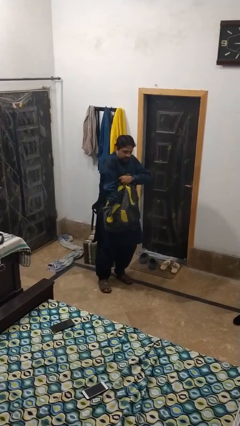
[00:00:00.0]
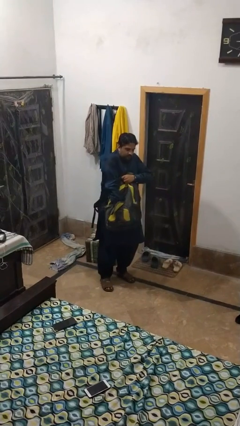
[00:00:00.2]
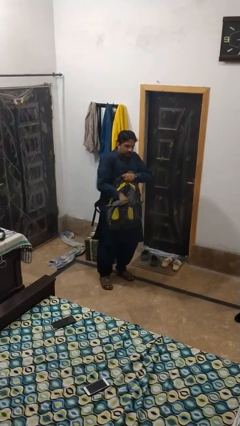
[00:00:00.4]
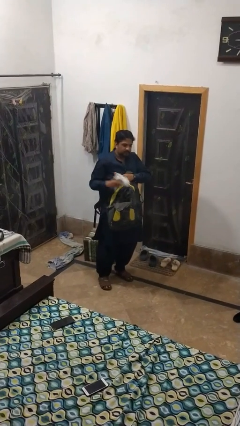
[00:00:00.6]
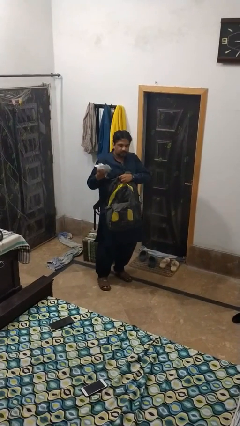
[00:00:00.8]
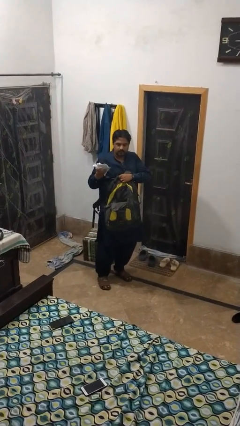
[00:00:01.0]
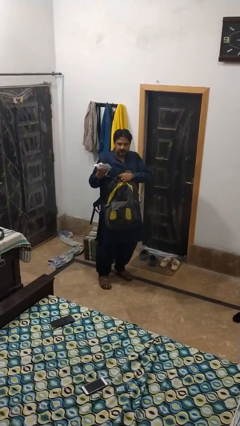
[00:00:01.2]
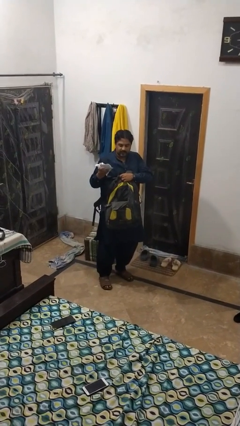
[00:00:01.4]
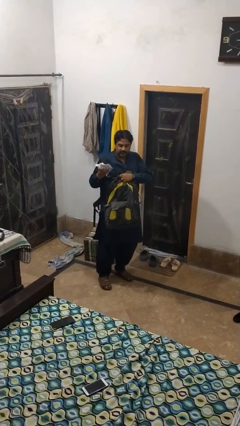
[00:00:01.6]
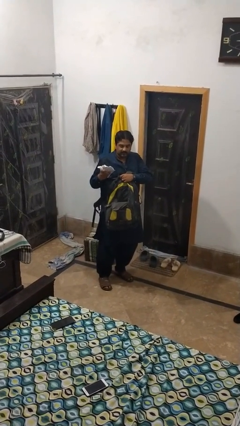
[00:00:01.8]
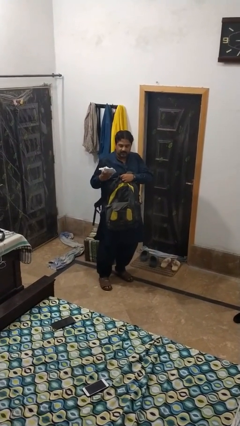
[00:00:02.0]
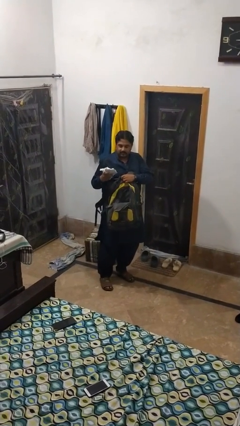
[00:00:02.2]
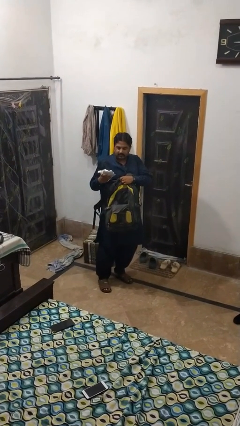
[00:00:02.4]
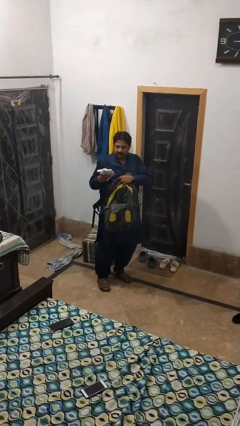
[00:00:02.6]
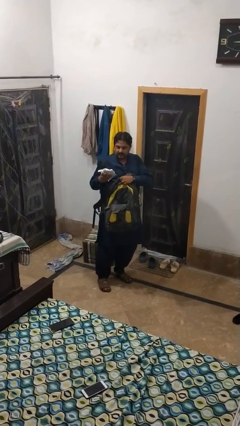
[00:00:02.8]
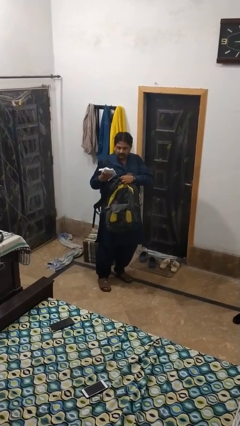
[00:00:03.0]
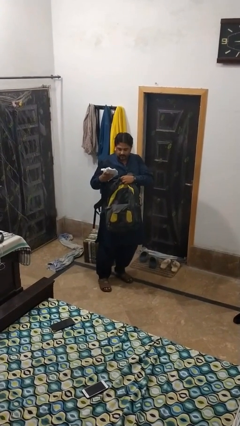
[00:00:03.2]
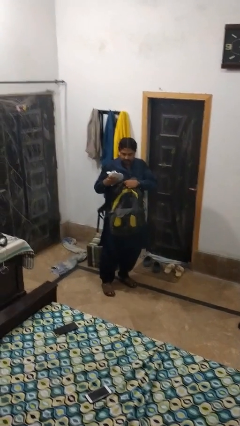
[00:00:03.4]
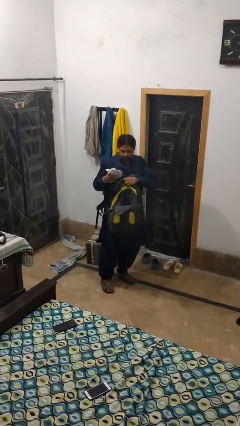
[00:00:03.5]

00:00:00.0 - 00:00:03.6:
person takes object from backpack

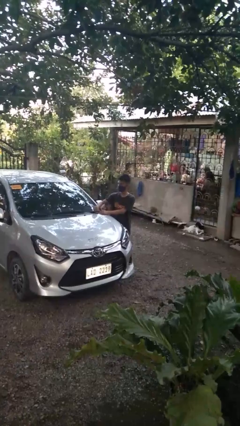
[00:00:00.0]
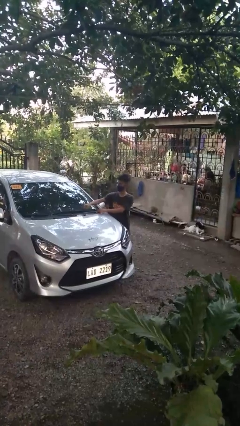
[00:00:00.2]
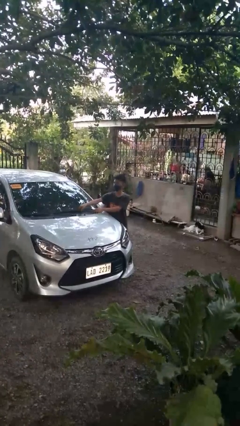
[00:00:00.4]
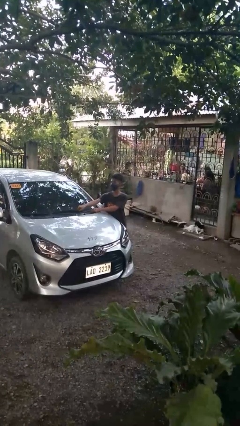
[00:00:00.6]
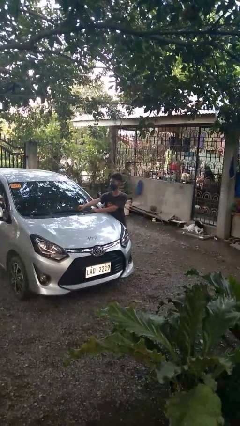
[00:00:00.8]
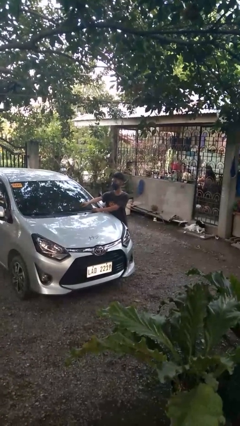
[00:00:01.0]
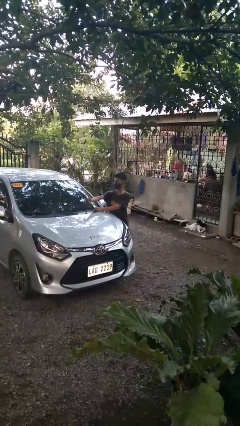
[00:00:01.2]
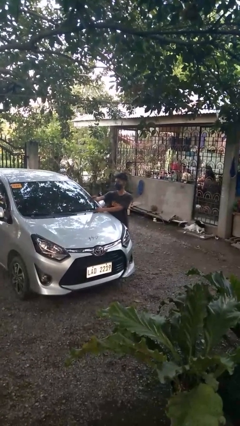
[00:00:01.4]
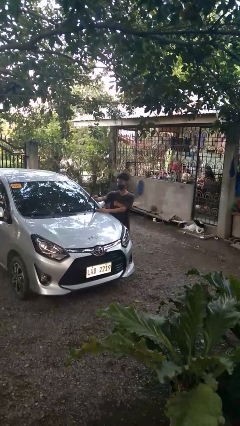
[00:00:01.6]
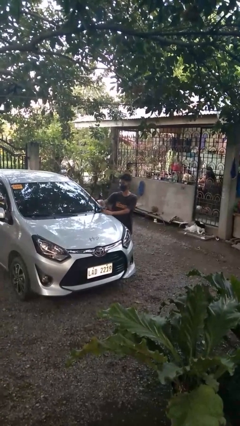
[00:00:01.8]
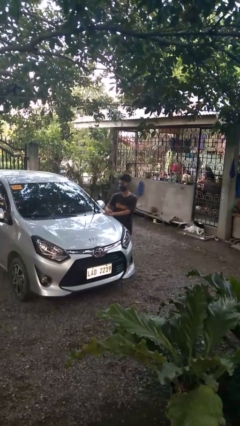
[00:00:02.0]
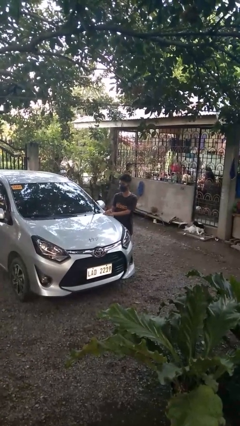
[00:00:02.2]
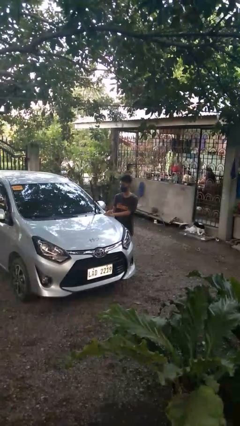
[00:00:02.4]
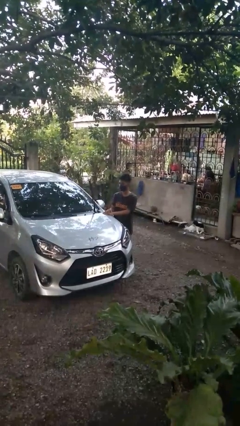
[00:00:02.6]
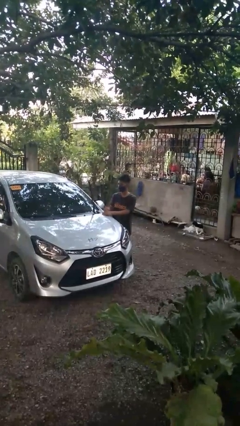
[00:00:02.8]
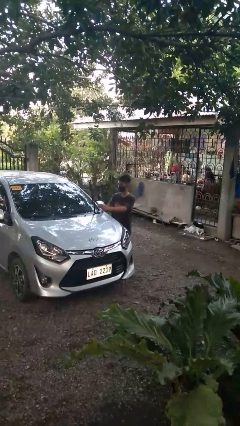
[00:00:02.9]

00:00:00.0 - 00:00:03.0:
person flips up car wipers

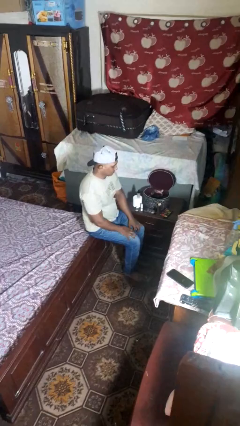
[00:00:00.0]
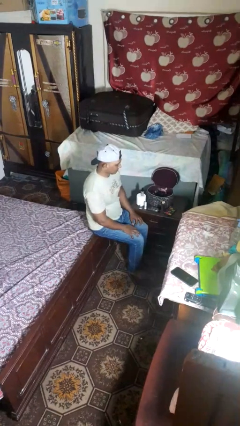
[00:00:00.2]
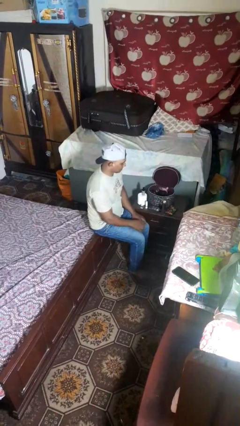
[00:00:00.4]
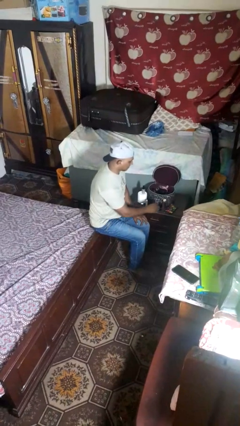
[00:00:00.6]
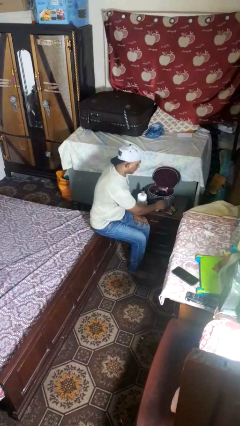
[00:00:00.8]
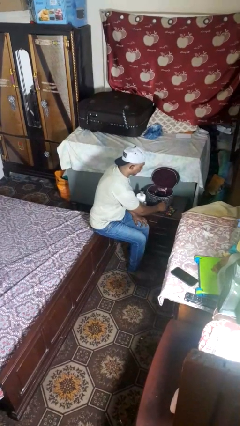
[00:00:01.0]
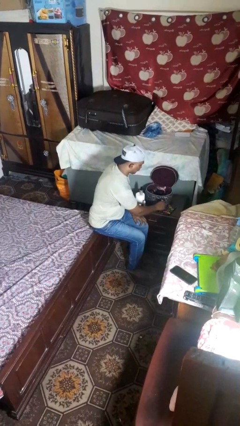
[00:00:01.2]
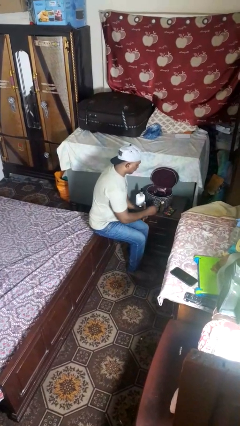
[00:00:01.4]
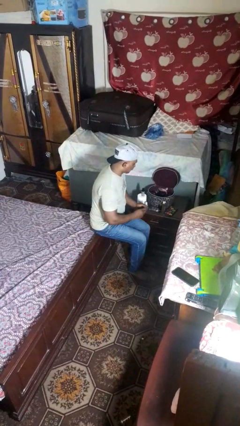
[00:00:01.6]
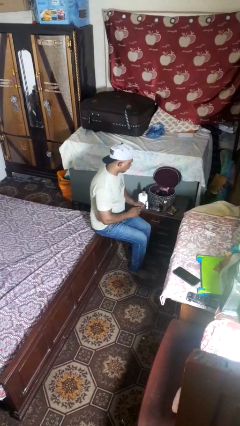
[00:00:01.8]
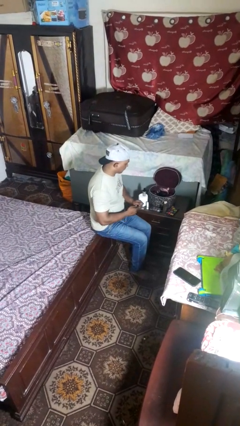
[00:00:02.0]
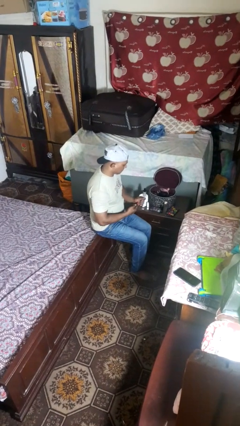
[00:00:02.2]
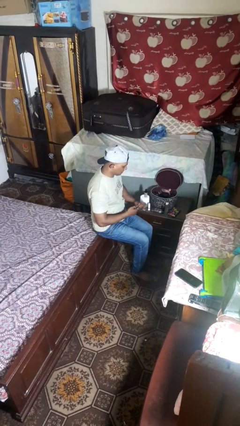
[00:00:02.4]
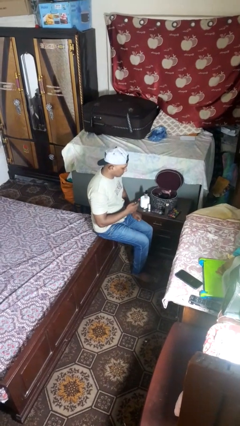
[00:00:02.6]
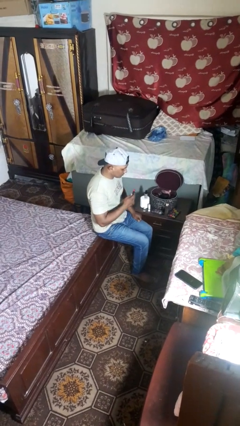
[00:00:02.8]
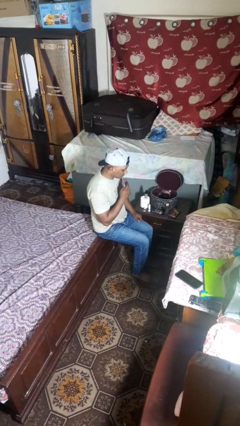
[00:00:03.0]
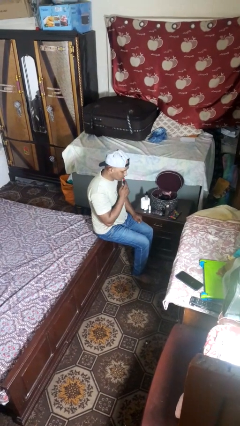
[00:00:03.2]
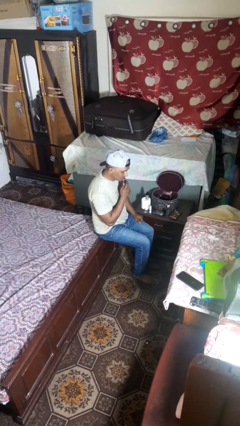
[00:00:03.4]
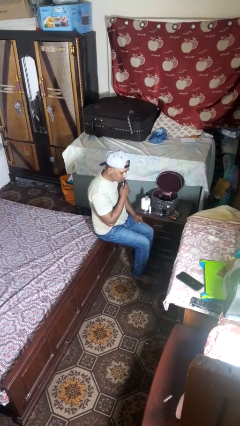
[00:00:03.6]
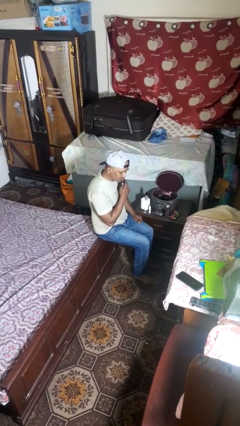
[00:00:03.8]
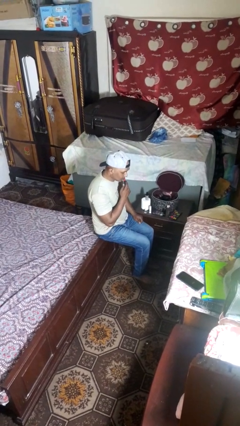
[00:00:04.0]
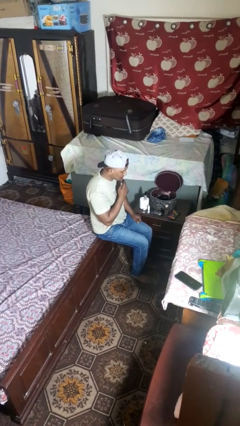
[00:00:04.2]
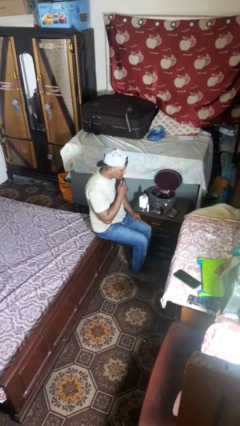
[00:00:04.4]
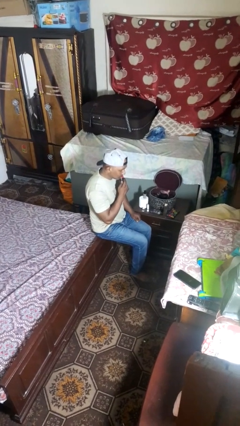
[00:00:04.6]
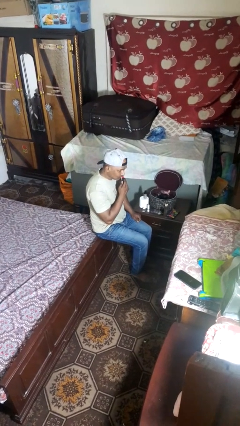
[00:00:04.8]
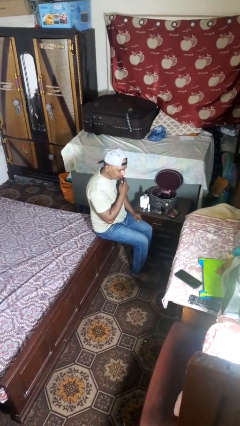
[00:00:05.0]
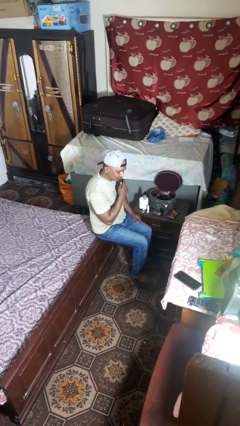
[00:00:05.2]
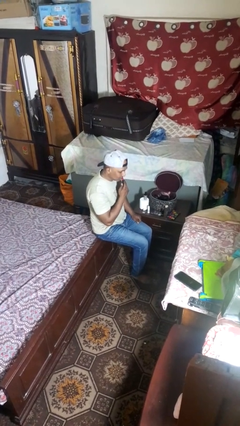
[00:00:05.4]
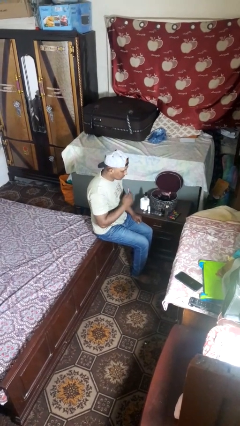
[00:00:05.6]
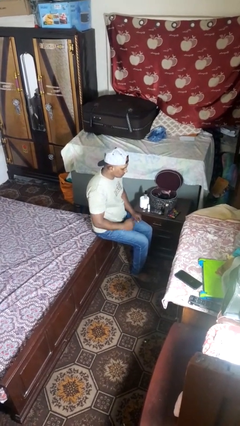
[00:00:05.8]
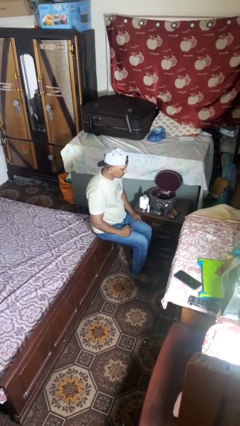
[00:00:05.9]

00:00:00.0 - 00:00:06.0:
person applies lip makeup

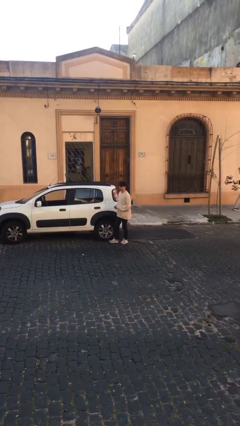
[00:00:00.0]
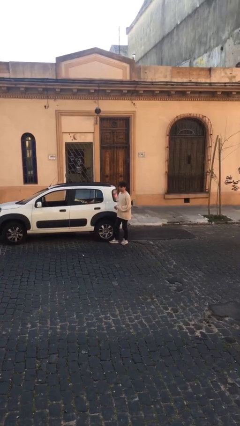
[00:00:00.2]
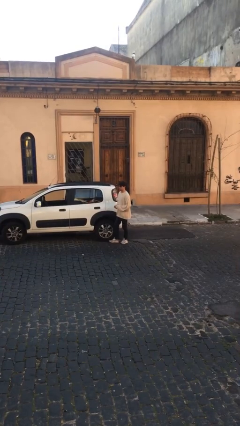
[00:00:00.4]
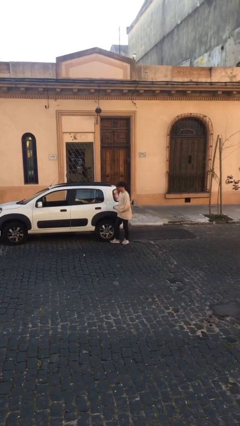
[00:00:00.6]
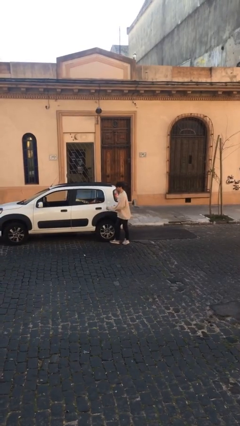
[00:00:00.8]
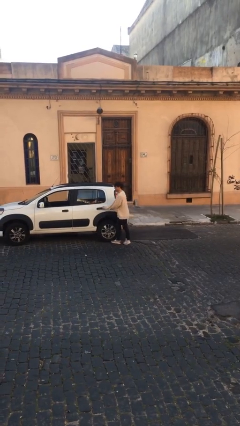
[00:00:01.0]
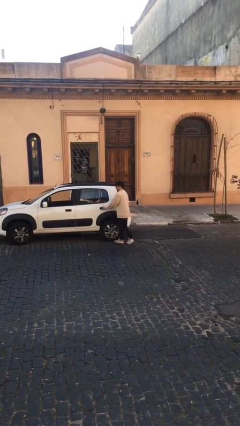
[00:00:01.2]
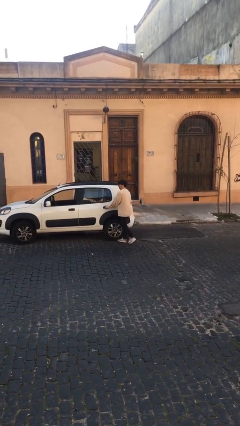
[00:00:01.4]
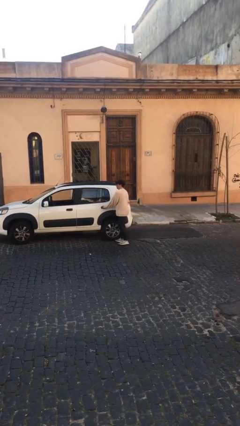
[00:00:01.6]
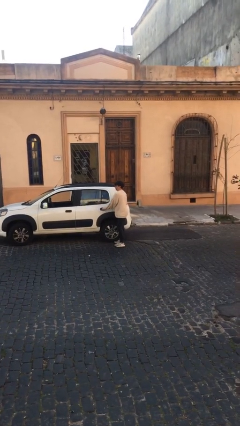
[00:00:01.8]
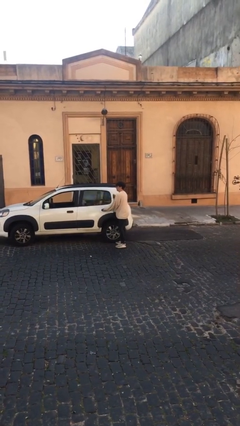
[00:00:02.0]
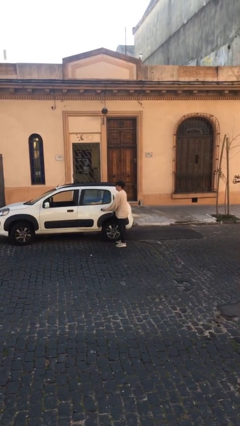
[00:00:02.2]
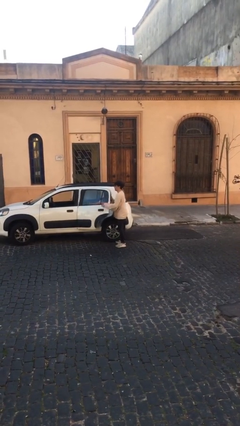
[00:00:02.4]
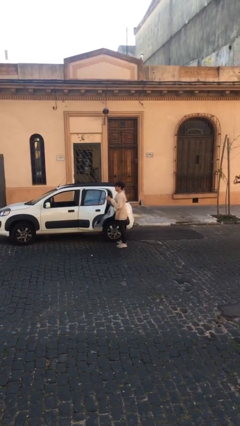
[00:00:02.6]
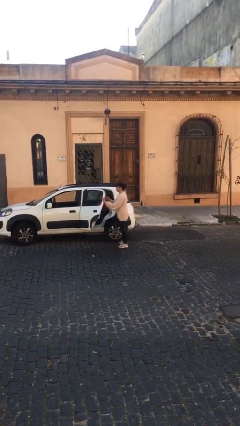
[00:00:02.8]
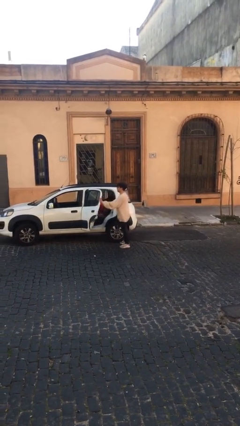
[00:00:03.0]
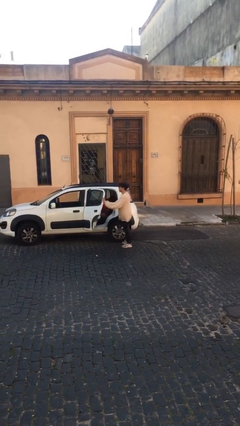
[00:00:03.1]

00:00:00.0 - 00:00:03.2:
person opens car door

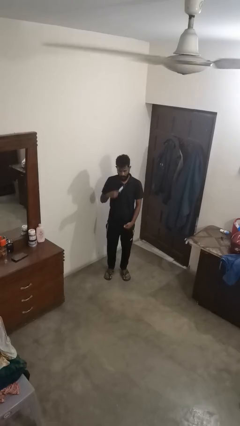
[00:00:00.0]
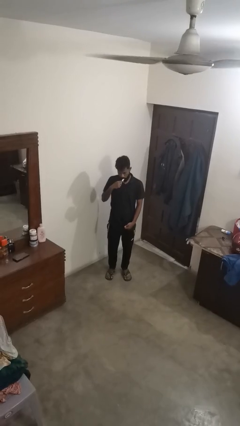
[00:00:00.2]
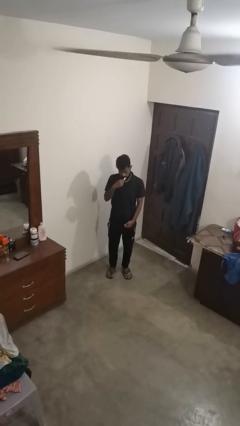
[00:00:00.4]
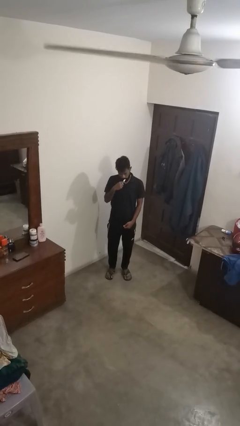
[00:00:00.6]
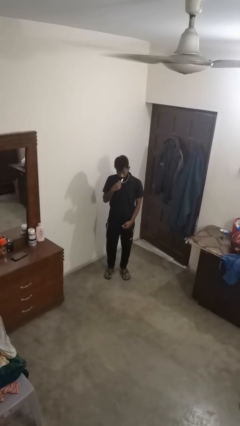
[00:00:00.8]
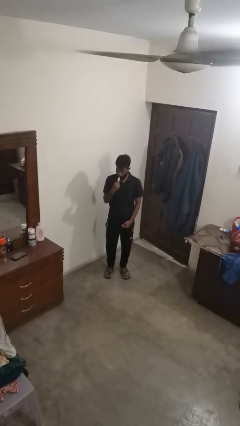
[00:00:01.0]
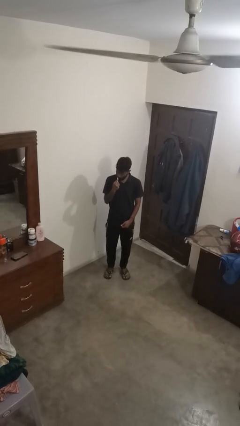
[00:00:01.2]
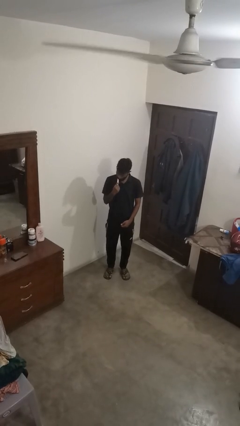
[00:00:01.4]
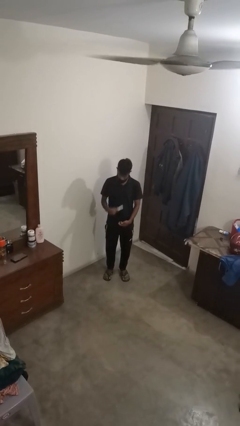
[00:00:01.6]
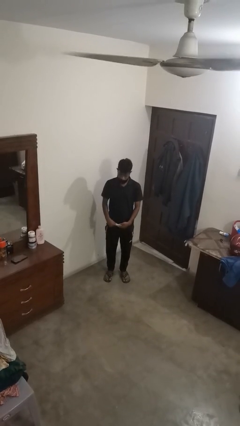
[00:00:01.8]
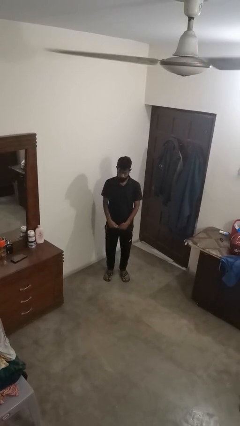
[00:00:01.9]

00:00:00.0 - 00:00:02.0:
person brushes teeth
